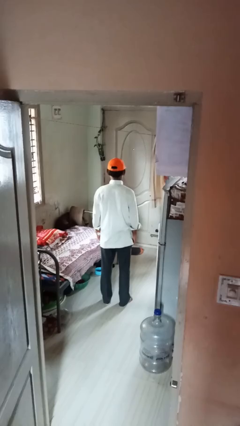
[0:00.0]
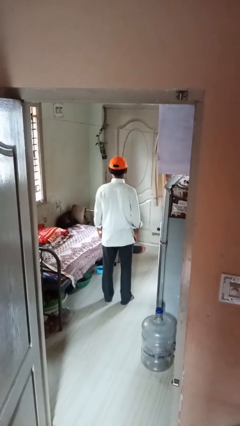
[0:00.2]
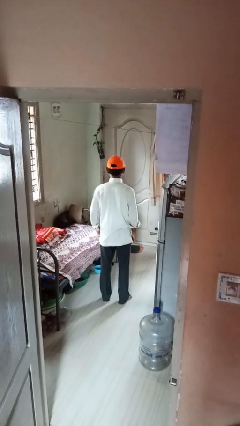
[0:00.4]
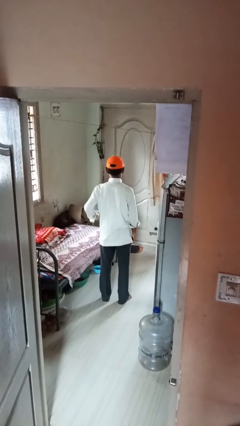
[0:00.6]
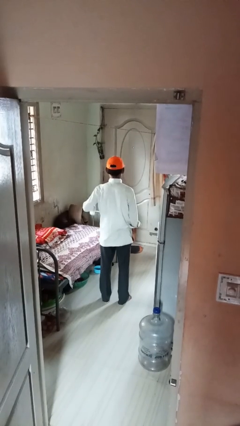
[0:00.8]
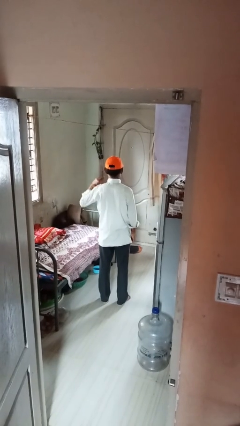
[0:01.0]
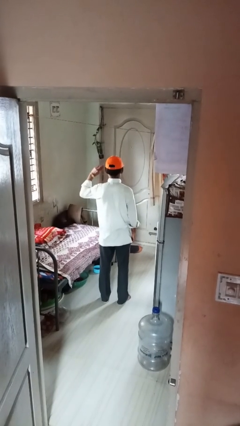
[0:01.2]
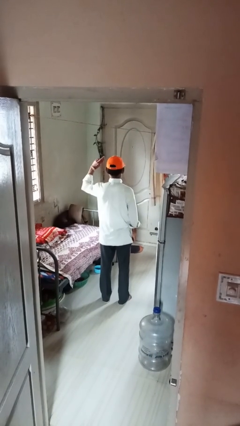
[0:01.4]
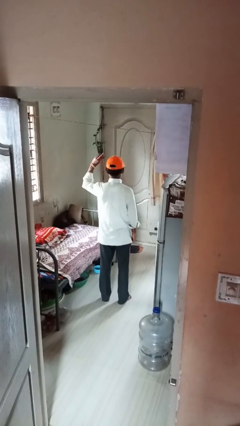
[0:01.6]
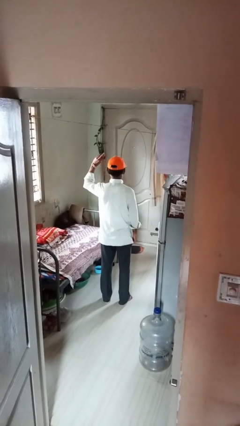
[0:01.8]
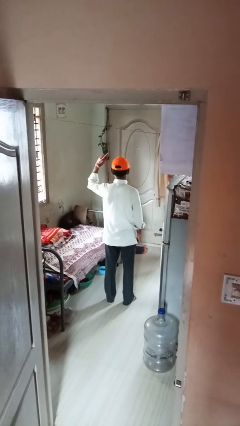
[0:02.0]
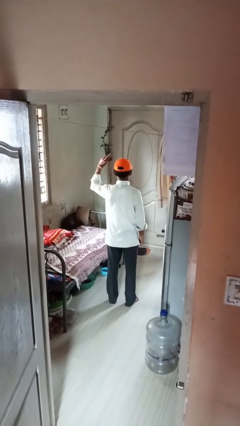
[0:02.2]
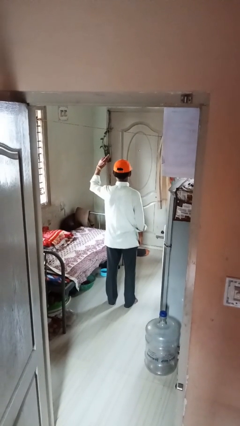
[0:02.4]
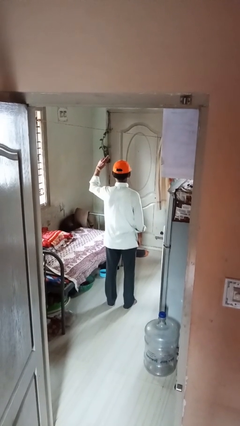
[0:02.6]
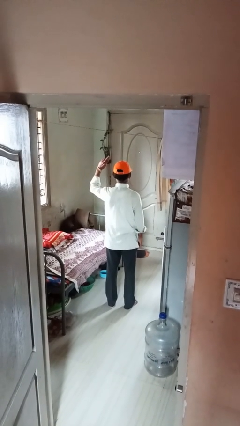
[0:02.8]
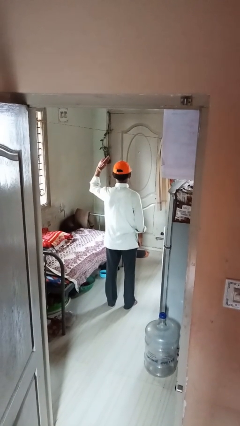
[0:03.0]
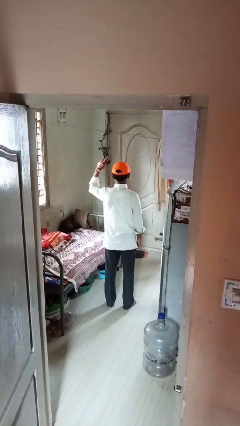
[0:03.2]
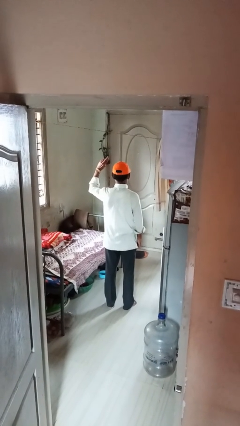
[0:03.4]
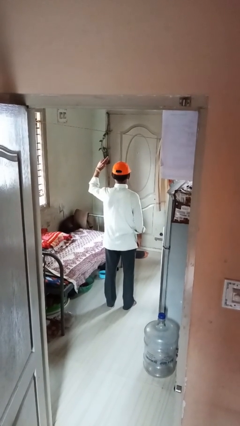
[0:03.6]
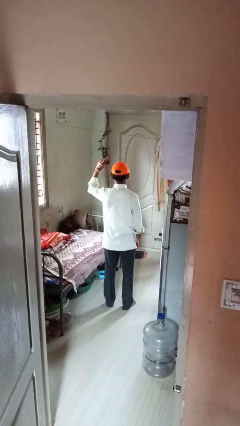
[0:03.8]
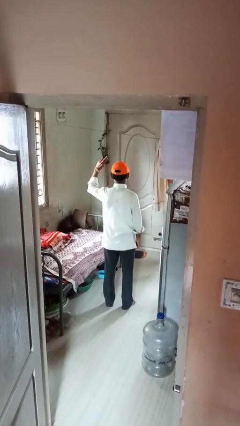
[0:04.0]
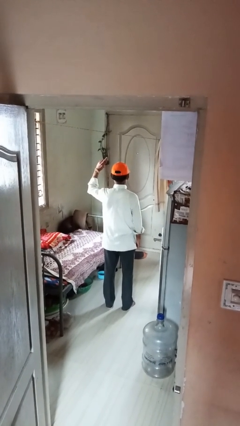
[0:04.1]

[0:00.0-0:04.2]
person gestures swipe up

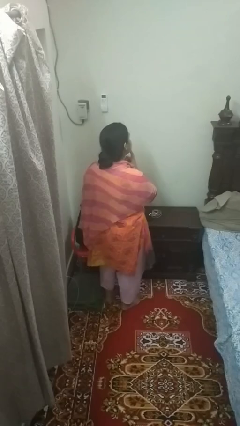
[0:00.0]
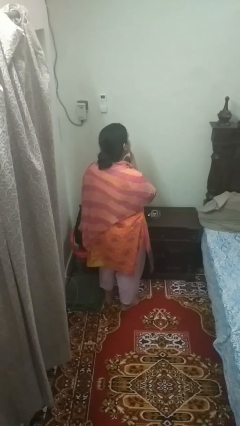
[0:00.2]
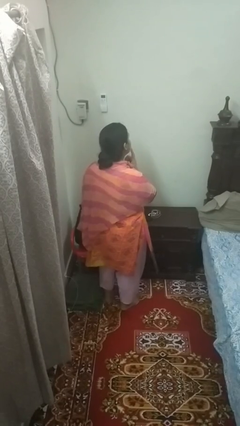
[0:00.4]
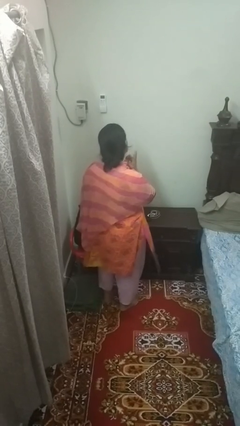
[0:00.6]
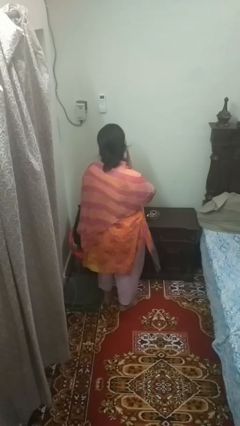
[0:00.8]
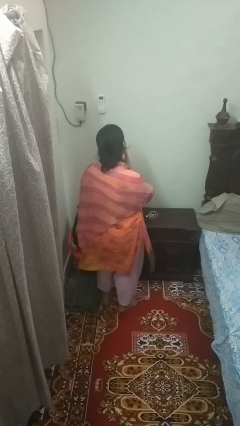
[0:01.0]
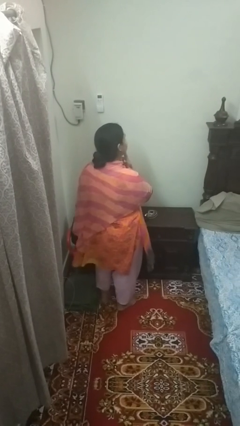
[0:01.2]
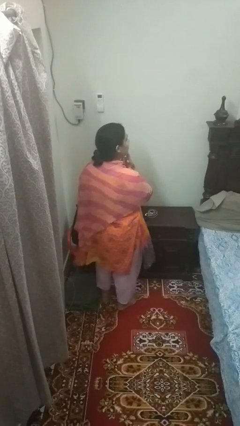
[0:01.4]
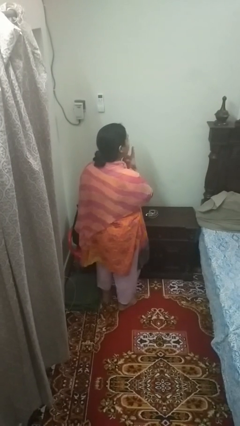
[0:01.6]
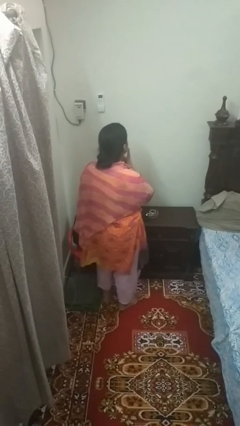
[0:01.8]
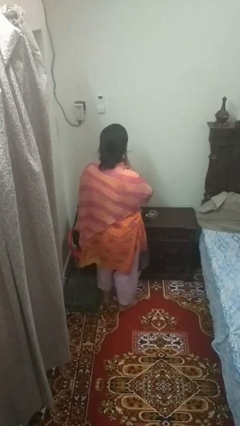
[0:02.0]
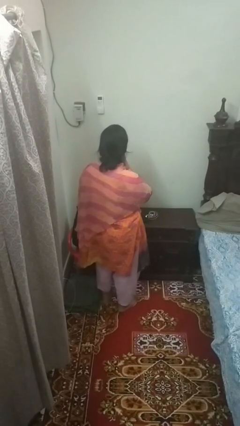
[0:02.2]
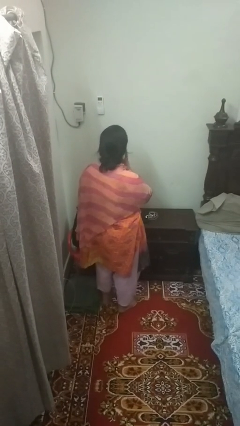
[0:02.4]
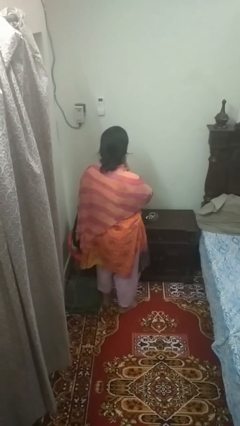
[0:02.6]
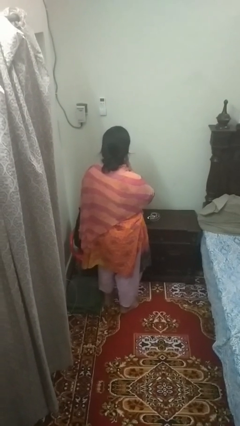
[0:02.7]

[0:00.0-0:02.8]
person strokes chin

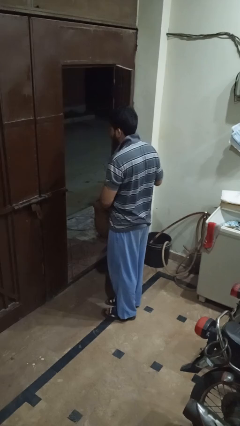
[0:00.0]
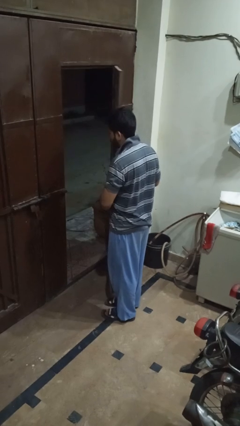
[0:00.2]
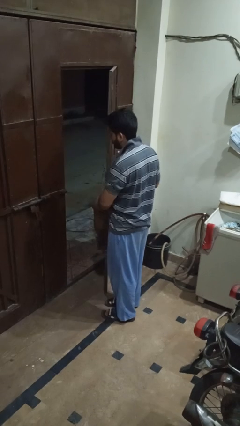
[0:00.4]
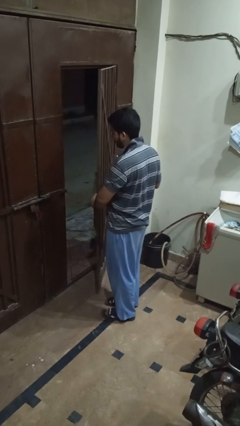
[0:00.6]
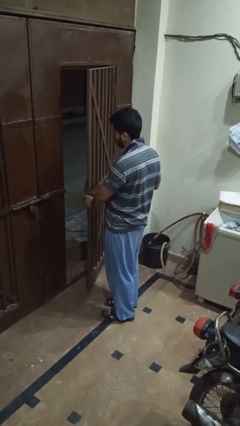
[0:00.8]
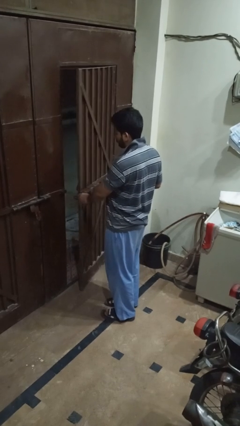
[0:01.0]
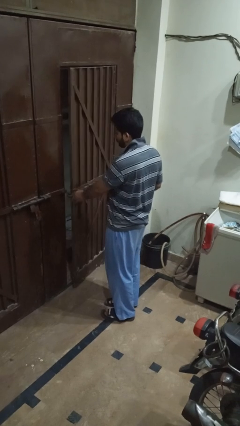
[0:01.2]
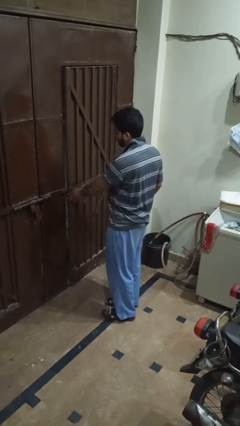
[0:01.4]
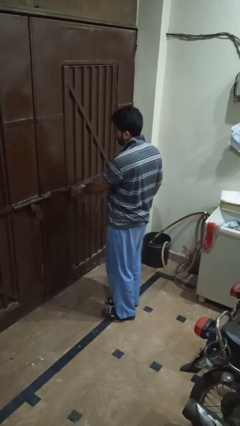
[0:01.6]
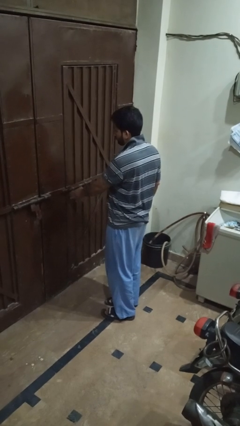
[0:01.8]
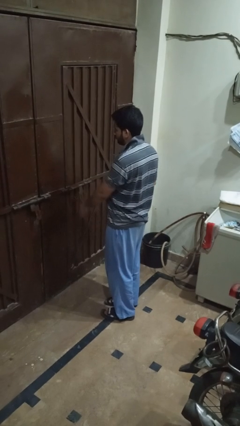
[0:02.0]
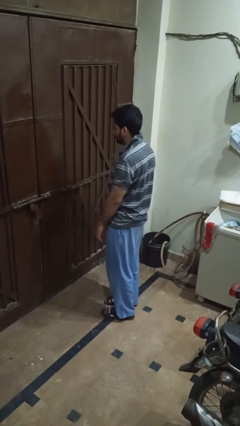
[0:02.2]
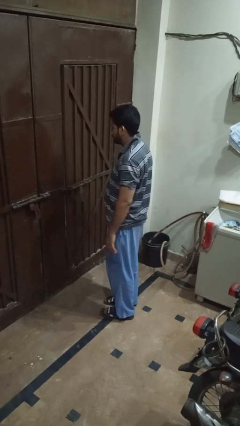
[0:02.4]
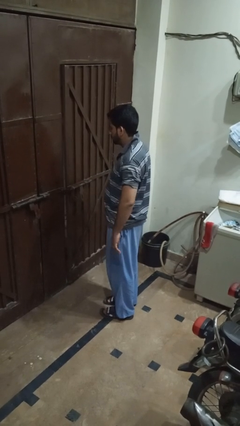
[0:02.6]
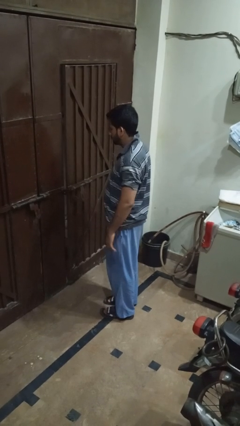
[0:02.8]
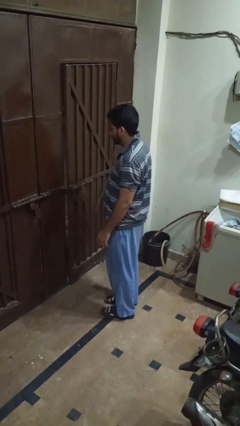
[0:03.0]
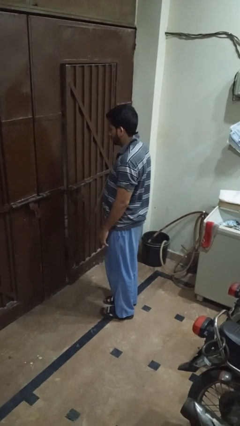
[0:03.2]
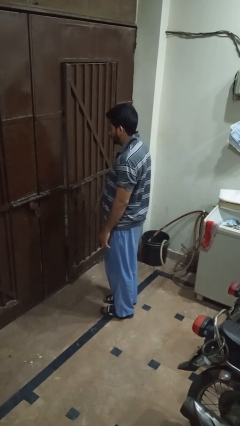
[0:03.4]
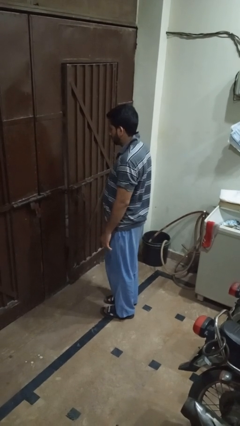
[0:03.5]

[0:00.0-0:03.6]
person closes gate

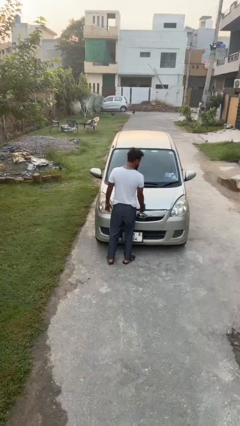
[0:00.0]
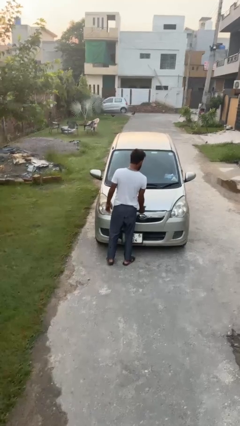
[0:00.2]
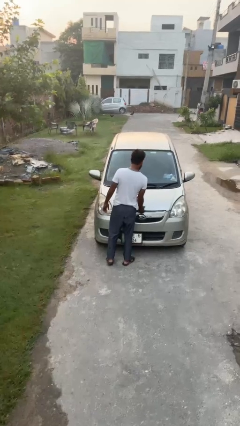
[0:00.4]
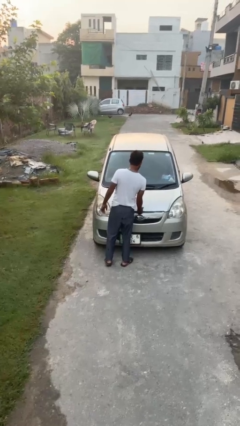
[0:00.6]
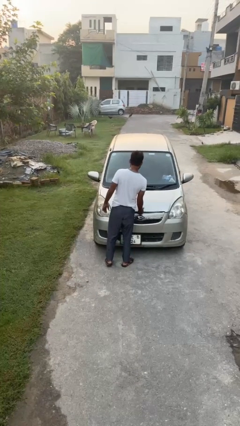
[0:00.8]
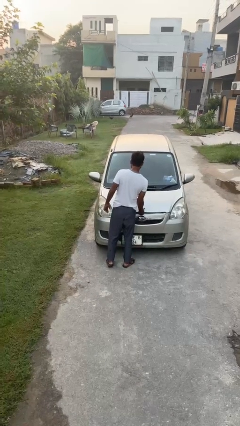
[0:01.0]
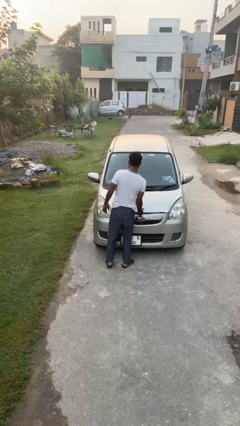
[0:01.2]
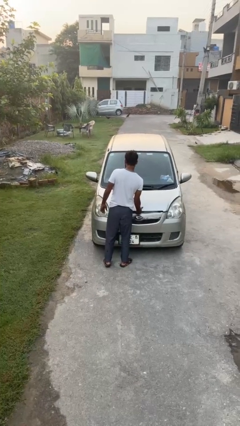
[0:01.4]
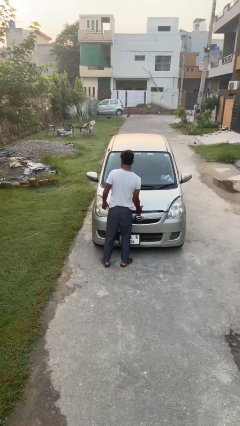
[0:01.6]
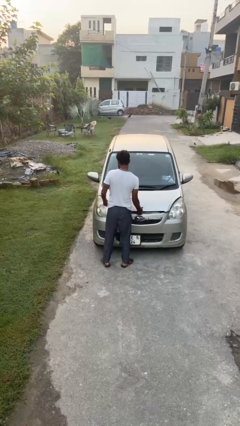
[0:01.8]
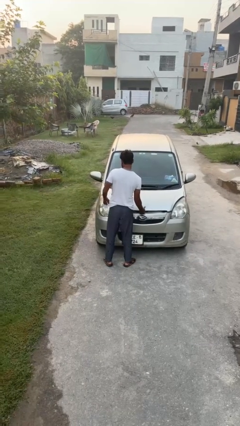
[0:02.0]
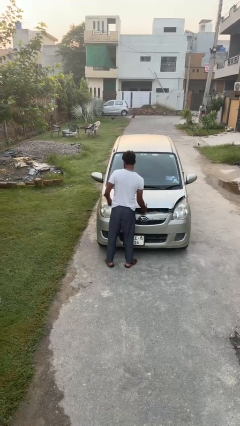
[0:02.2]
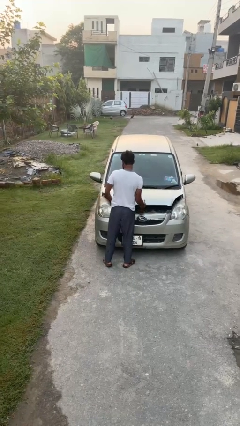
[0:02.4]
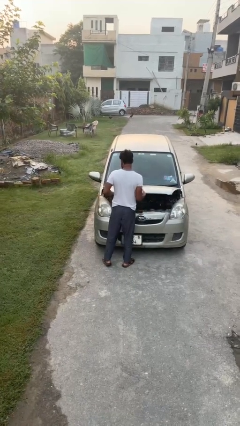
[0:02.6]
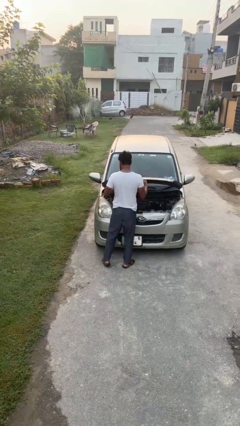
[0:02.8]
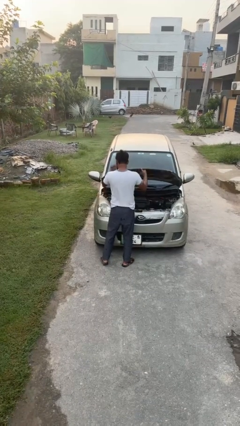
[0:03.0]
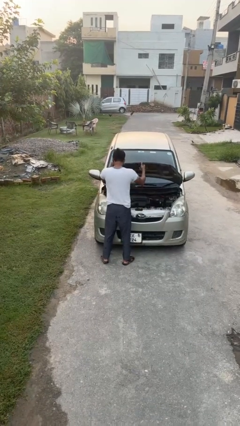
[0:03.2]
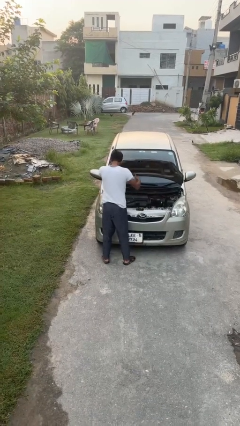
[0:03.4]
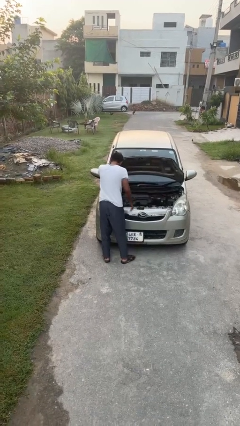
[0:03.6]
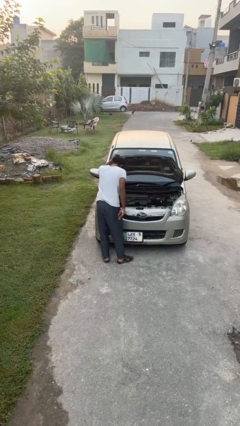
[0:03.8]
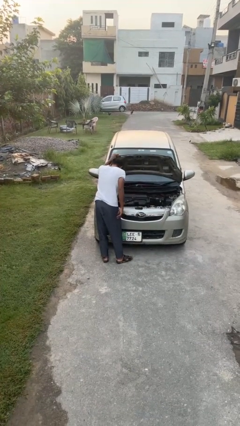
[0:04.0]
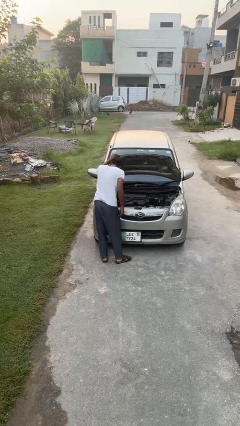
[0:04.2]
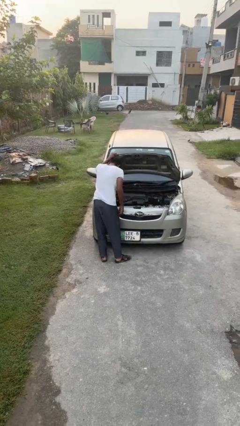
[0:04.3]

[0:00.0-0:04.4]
person opens car hood

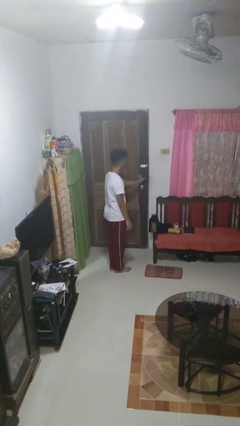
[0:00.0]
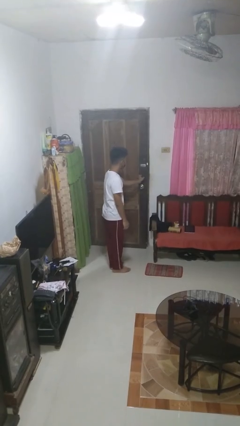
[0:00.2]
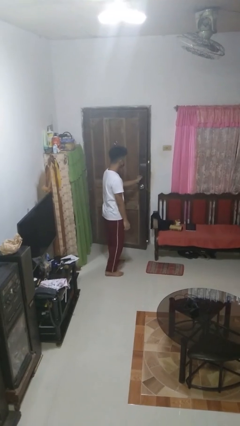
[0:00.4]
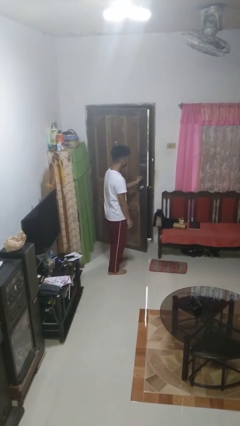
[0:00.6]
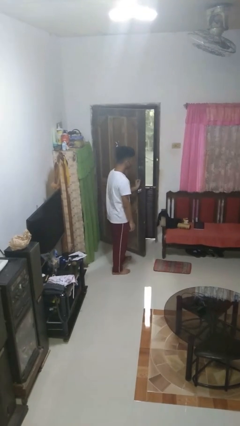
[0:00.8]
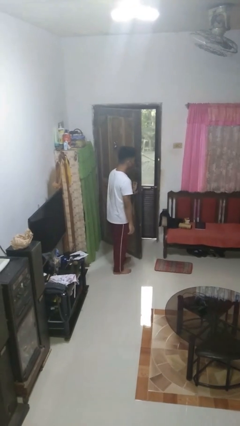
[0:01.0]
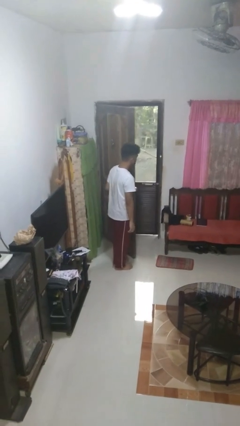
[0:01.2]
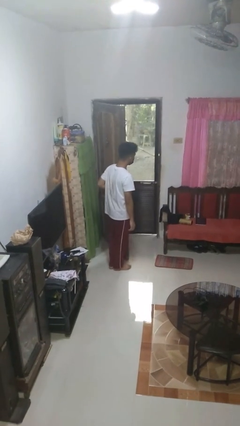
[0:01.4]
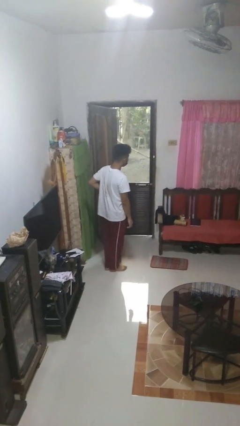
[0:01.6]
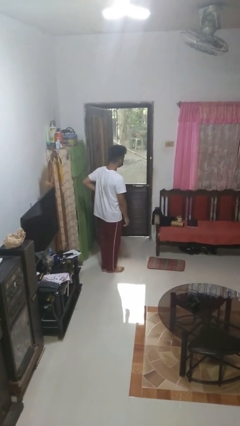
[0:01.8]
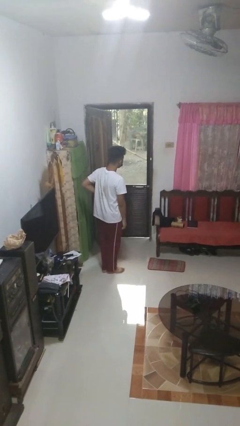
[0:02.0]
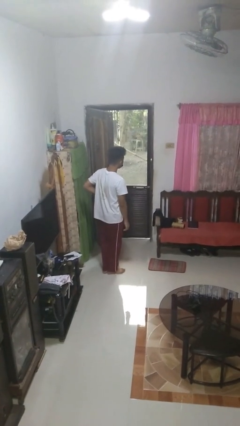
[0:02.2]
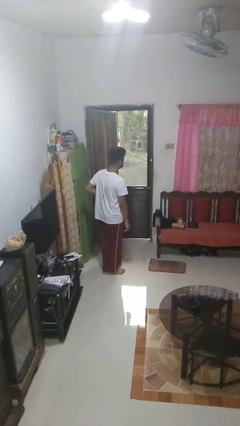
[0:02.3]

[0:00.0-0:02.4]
person opens facility door

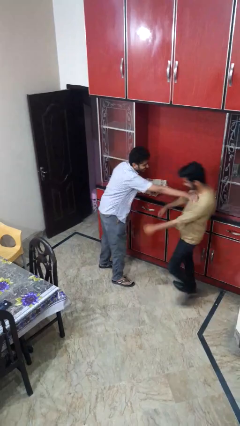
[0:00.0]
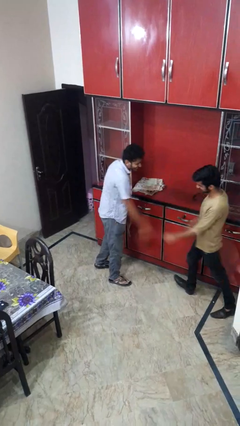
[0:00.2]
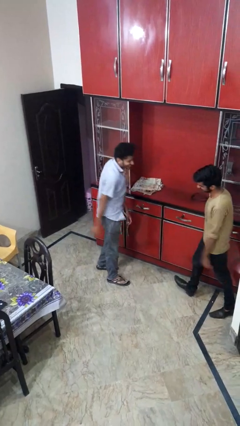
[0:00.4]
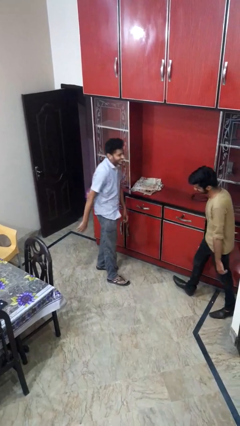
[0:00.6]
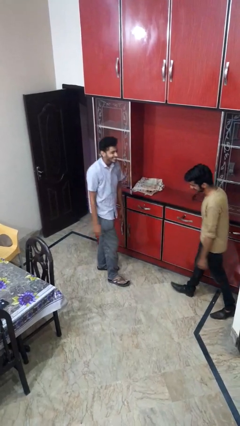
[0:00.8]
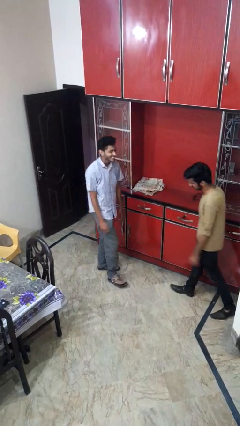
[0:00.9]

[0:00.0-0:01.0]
person shoves person
